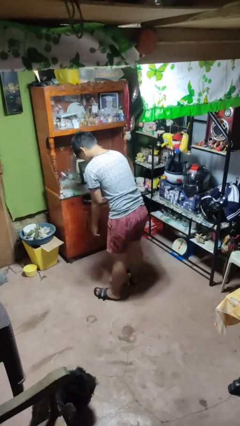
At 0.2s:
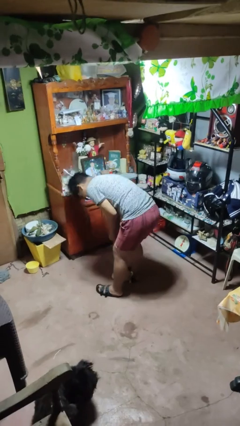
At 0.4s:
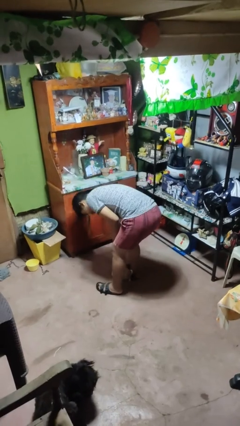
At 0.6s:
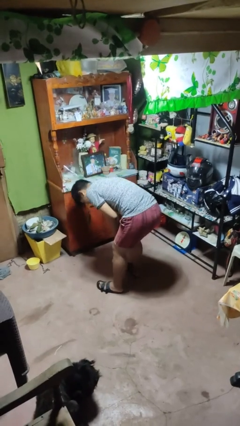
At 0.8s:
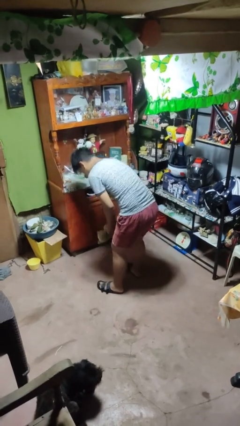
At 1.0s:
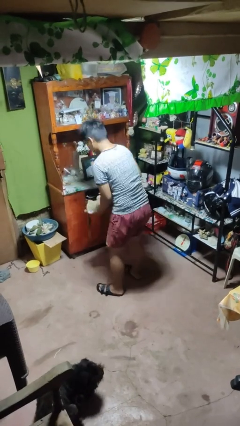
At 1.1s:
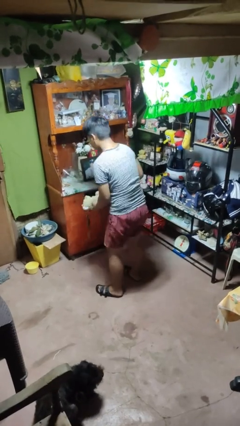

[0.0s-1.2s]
person picks up object from floor

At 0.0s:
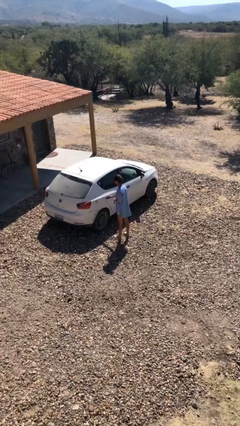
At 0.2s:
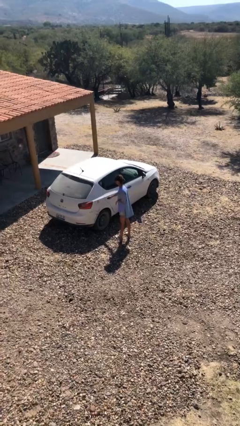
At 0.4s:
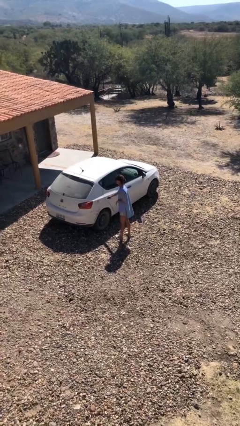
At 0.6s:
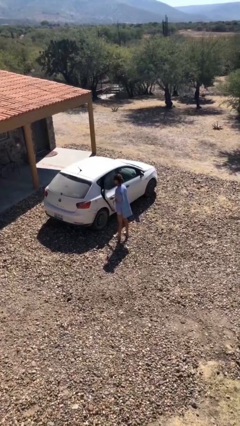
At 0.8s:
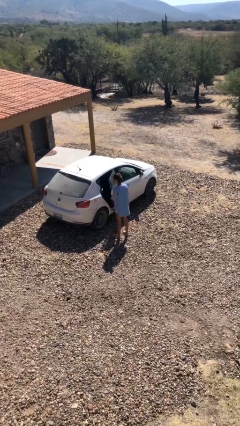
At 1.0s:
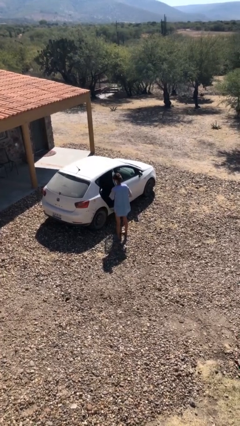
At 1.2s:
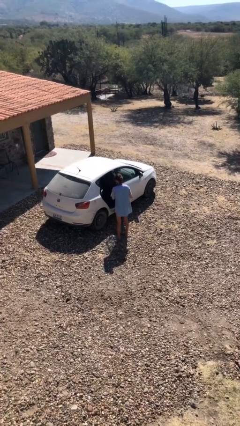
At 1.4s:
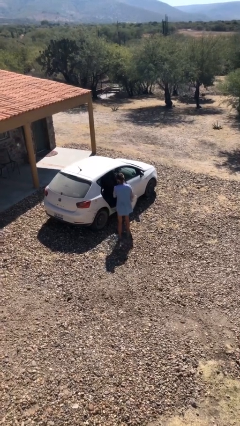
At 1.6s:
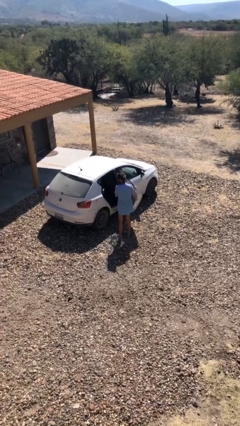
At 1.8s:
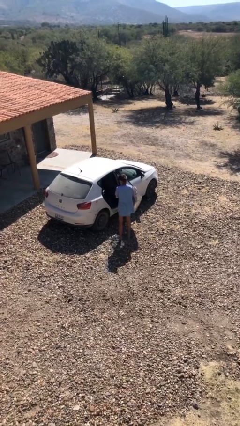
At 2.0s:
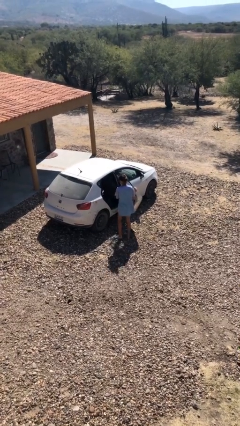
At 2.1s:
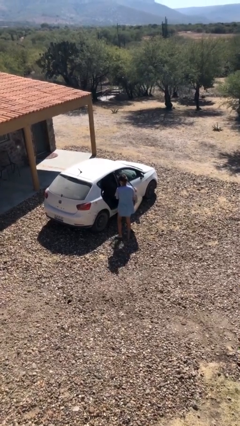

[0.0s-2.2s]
person opens car door

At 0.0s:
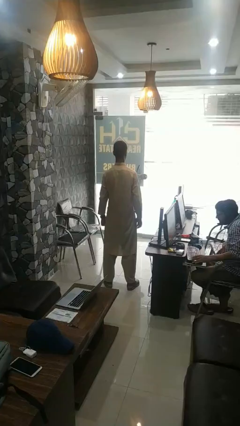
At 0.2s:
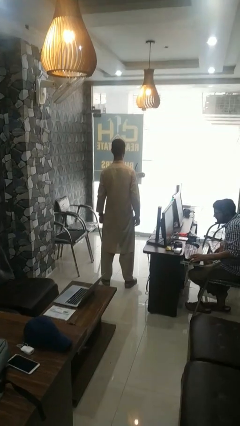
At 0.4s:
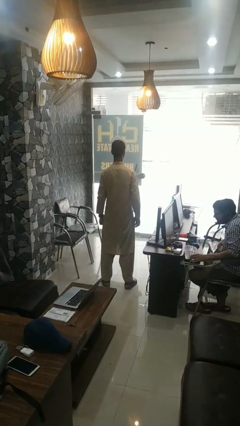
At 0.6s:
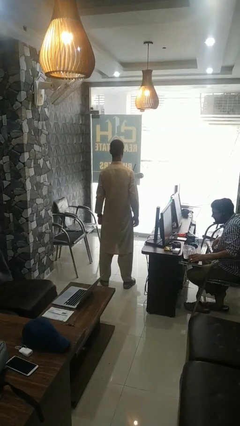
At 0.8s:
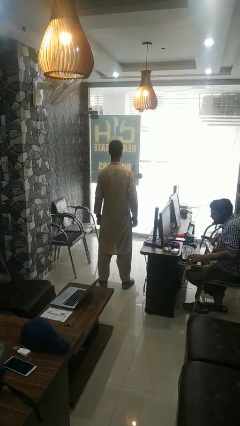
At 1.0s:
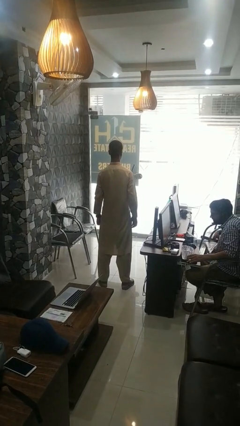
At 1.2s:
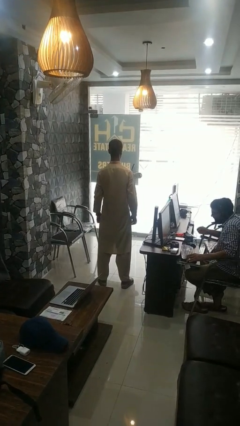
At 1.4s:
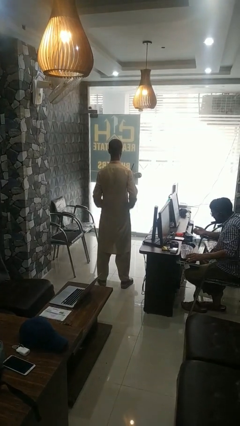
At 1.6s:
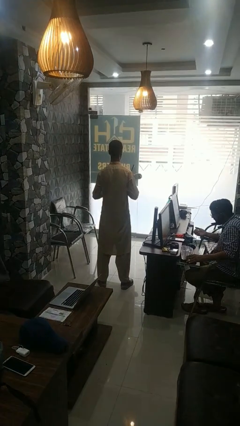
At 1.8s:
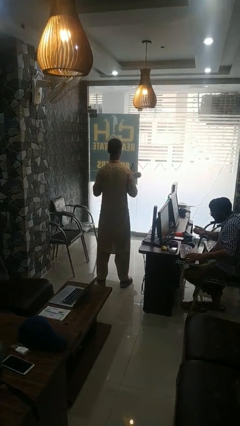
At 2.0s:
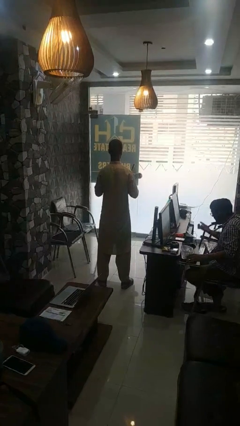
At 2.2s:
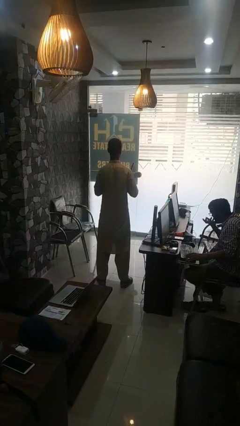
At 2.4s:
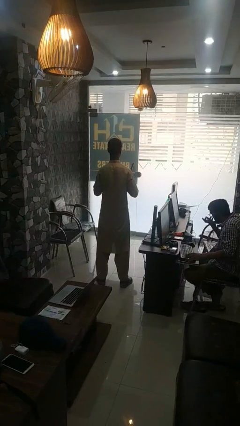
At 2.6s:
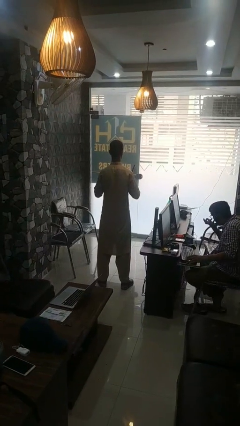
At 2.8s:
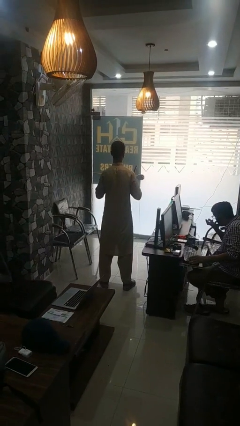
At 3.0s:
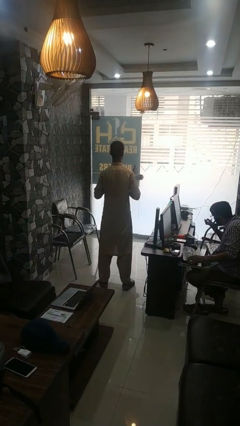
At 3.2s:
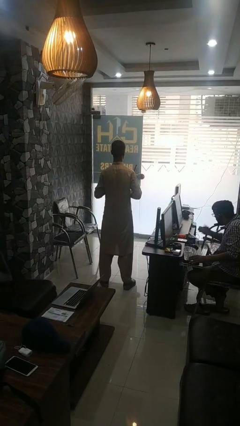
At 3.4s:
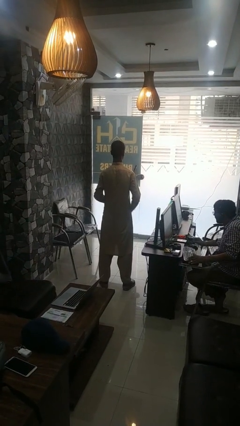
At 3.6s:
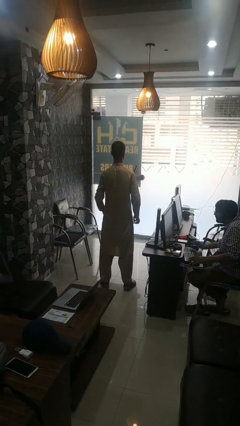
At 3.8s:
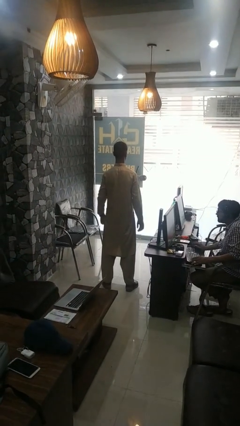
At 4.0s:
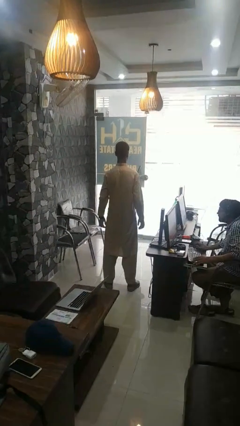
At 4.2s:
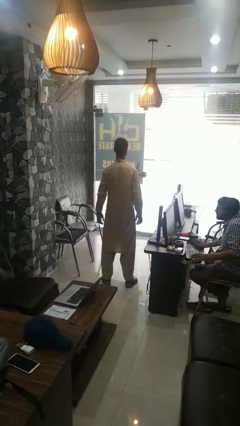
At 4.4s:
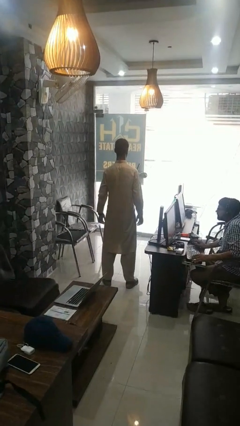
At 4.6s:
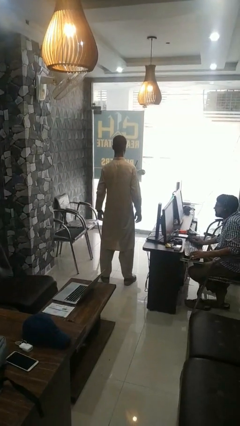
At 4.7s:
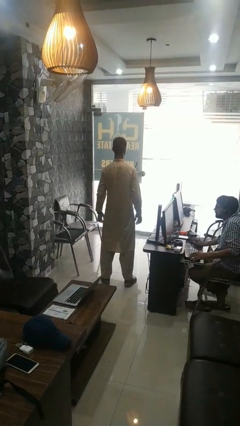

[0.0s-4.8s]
person buttons shirt

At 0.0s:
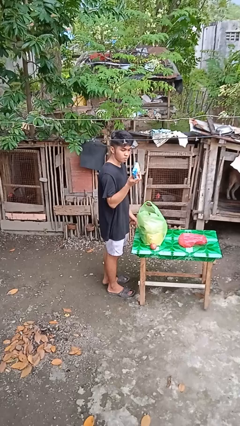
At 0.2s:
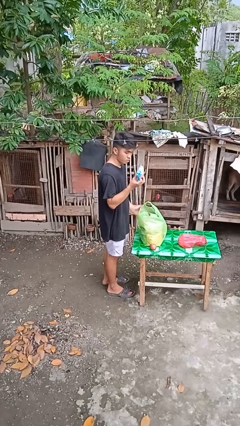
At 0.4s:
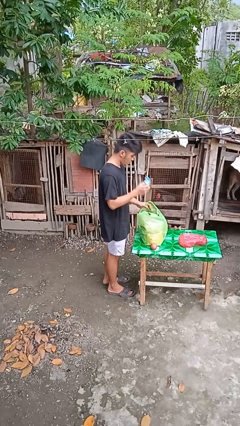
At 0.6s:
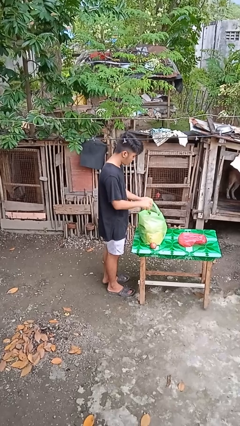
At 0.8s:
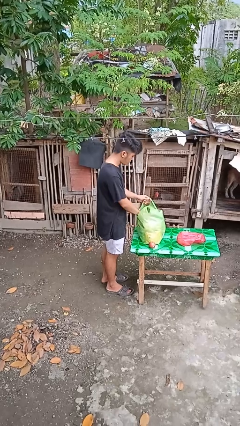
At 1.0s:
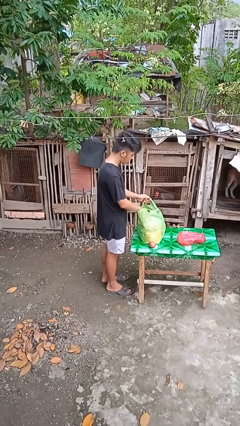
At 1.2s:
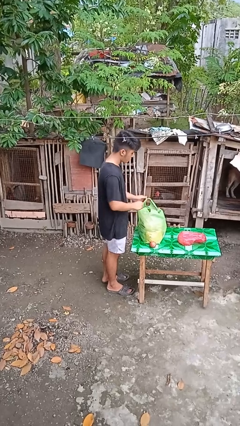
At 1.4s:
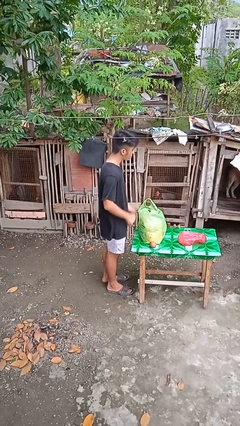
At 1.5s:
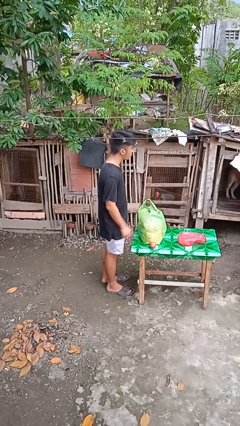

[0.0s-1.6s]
person puts object into bag

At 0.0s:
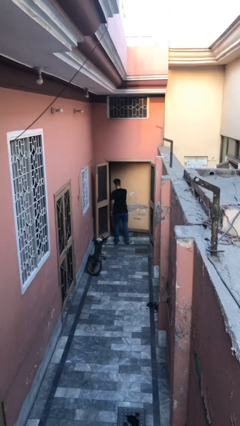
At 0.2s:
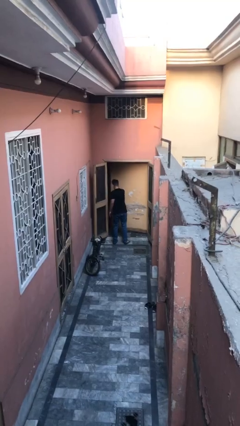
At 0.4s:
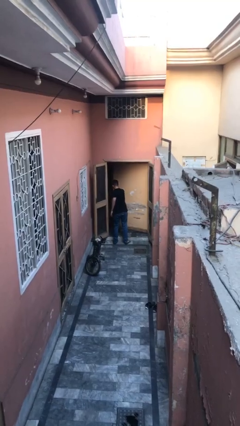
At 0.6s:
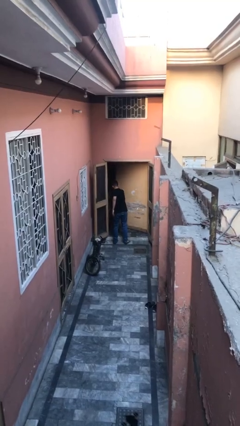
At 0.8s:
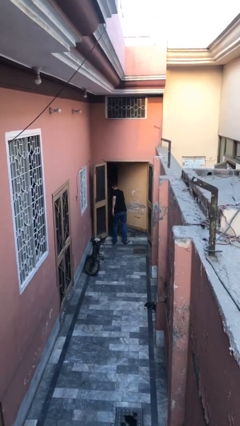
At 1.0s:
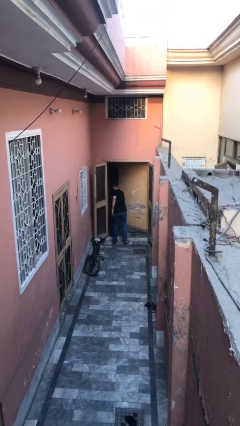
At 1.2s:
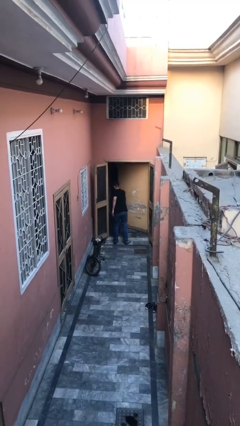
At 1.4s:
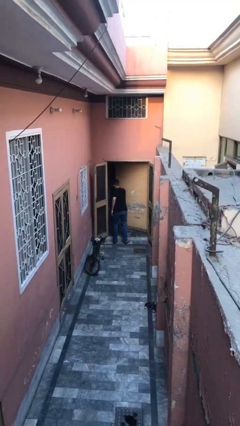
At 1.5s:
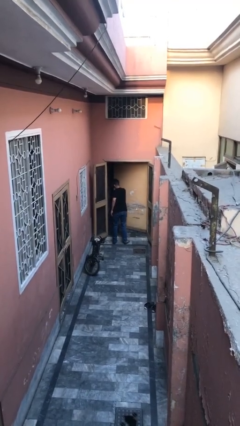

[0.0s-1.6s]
person opens facility door

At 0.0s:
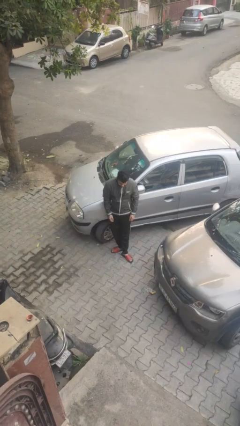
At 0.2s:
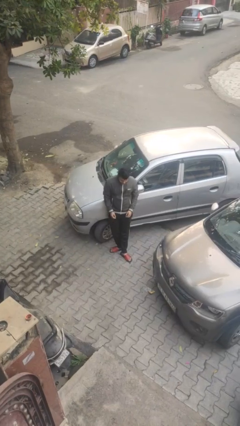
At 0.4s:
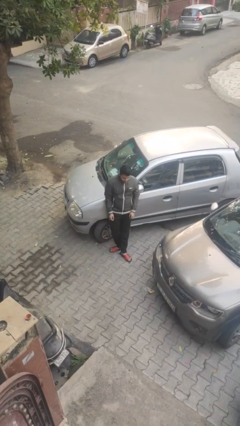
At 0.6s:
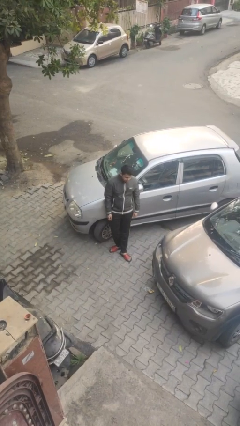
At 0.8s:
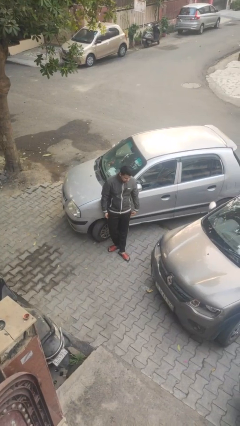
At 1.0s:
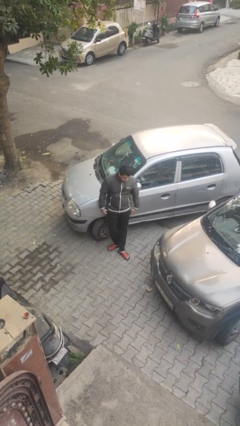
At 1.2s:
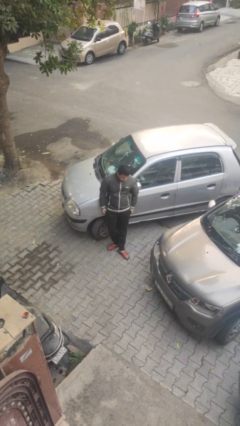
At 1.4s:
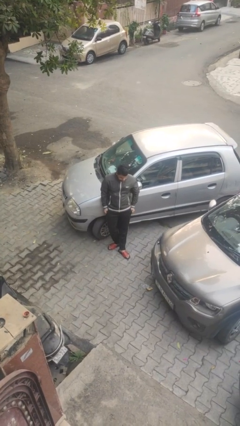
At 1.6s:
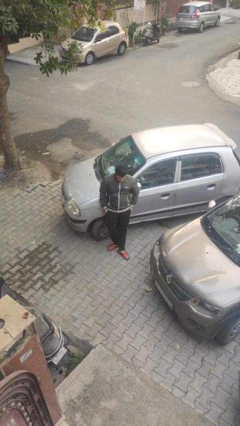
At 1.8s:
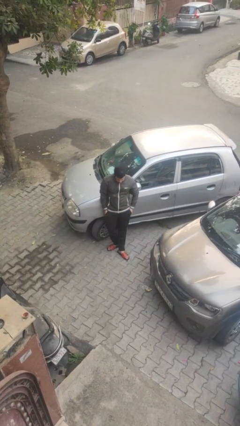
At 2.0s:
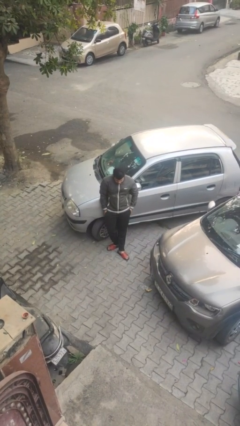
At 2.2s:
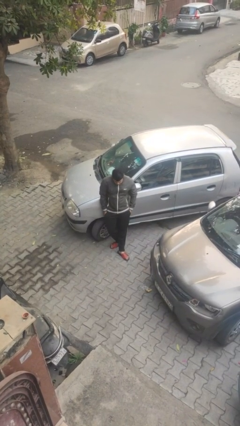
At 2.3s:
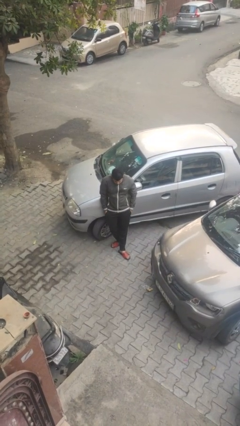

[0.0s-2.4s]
person leans against car

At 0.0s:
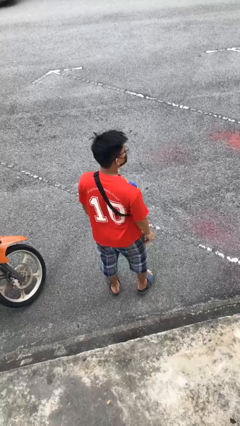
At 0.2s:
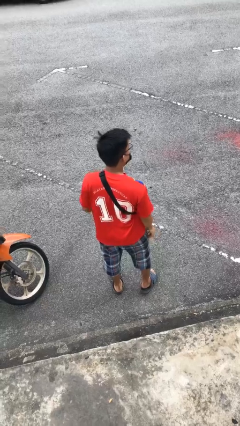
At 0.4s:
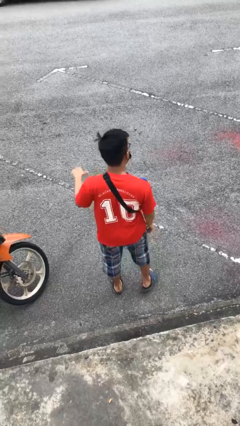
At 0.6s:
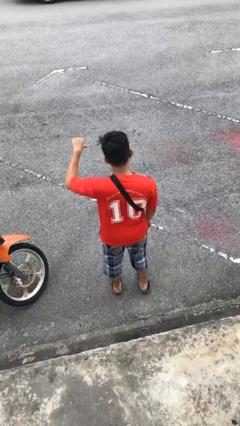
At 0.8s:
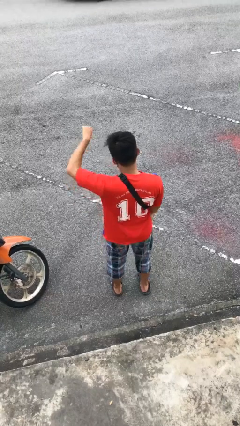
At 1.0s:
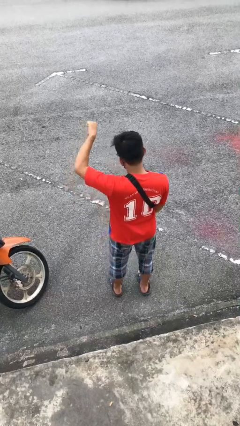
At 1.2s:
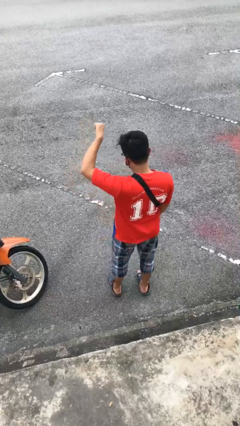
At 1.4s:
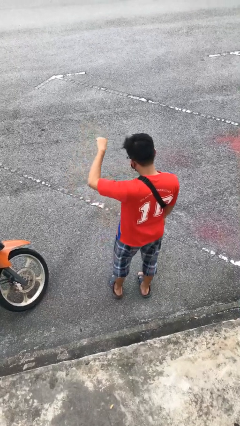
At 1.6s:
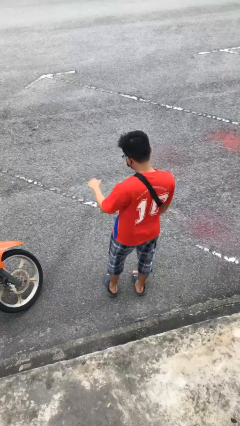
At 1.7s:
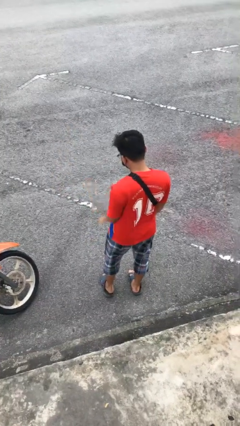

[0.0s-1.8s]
person gestures thumbs down

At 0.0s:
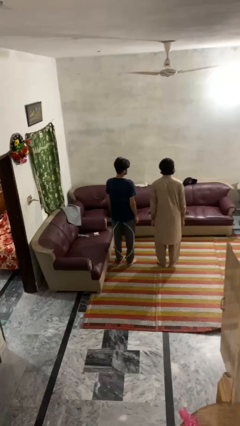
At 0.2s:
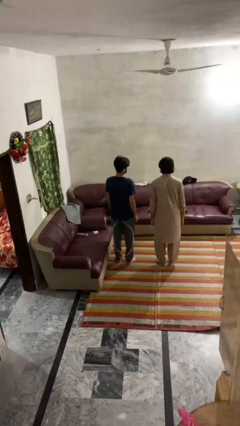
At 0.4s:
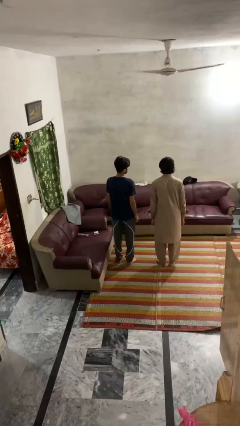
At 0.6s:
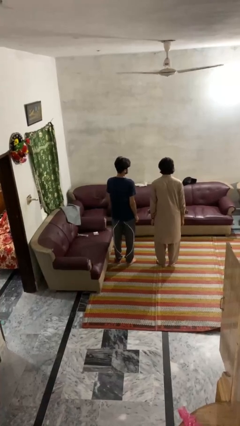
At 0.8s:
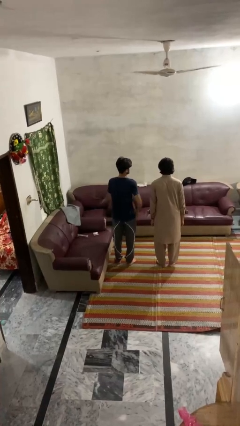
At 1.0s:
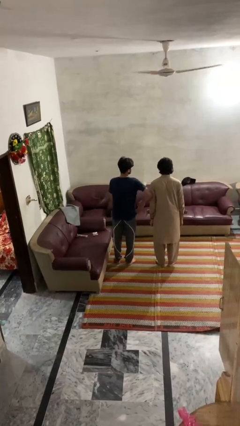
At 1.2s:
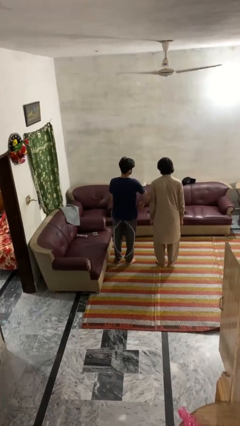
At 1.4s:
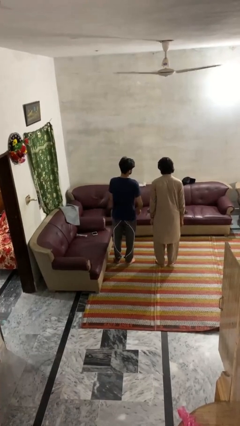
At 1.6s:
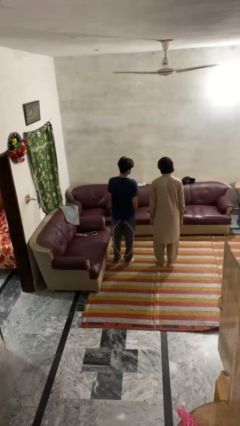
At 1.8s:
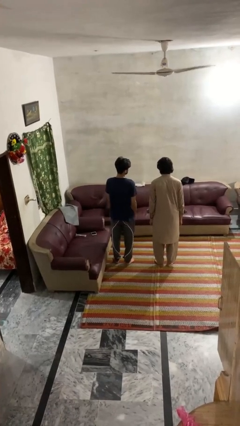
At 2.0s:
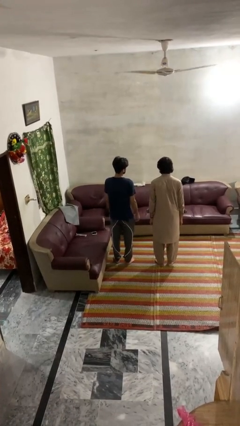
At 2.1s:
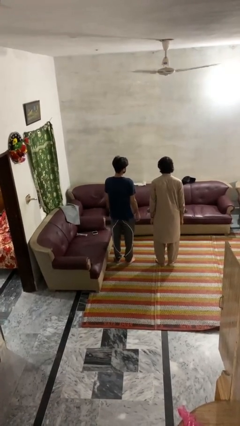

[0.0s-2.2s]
person nudges person with elbow
